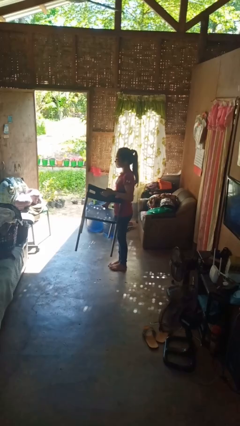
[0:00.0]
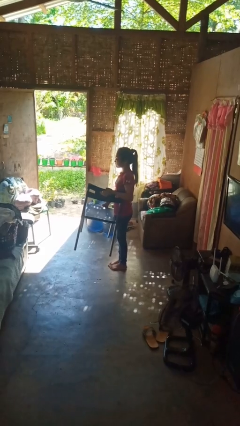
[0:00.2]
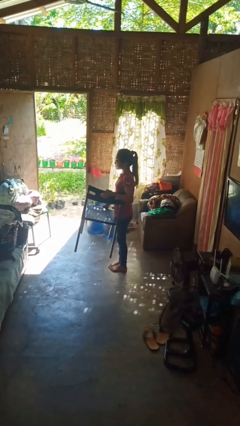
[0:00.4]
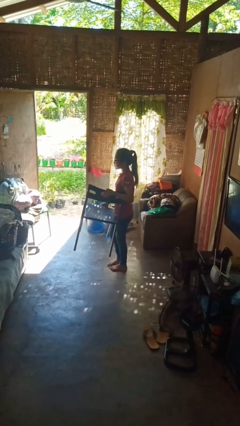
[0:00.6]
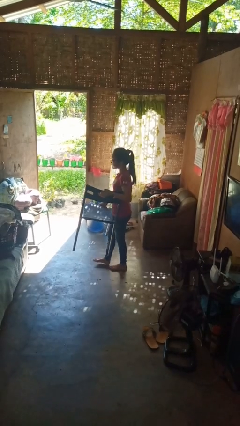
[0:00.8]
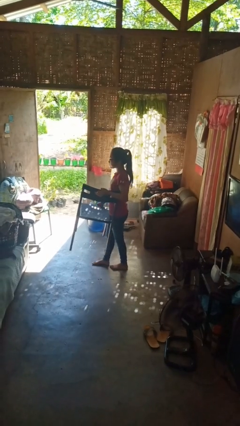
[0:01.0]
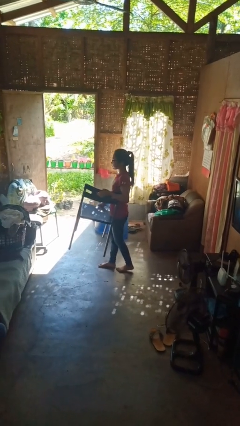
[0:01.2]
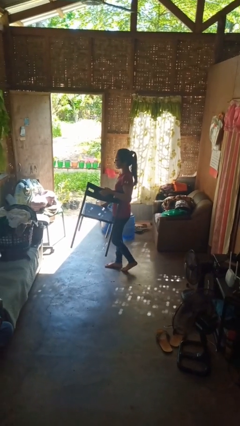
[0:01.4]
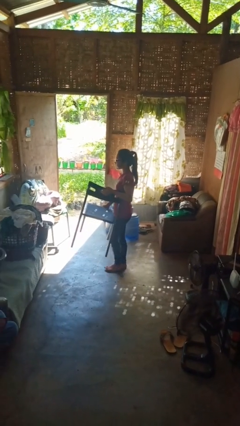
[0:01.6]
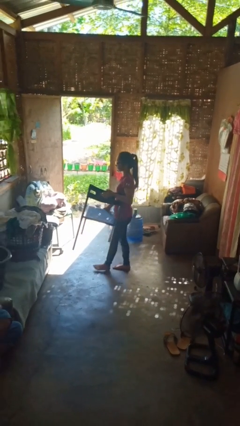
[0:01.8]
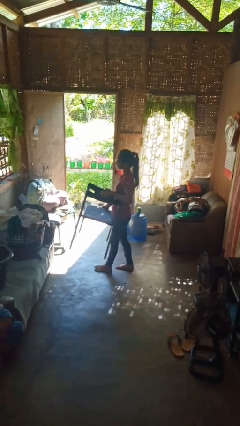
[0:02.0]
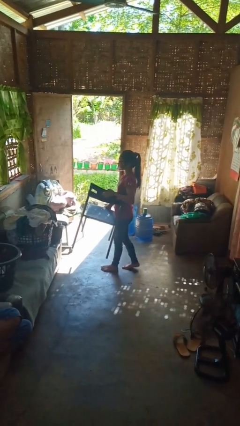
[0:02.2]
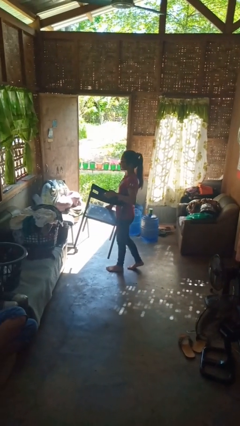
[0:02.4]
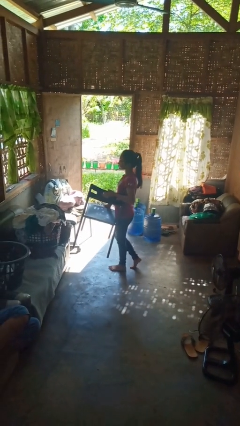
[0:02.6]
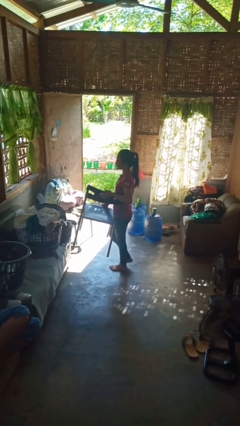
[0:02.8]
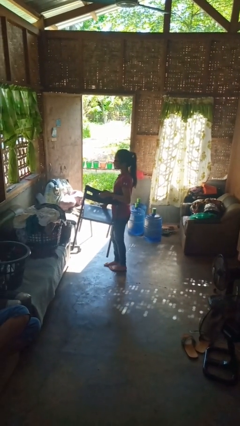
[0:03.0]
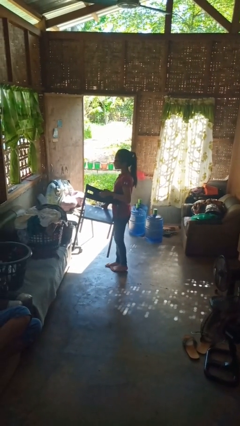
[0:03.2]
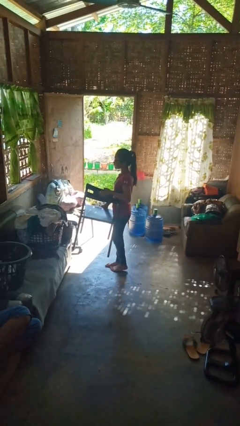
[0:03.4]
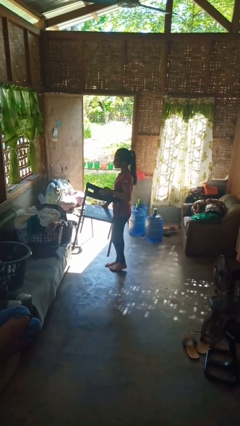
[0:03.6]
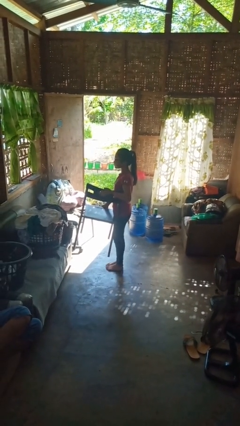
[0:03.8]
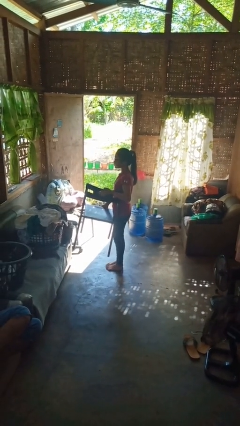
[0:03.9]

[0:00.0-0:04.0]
person carries furniture

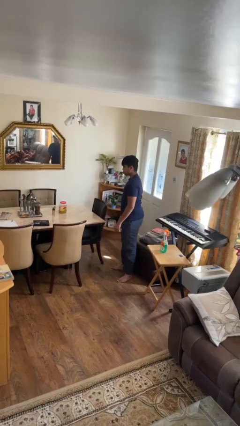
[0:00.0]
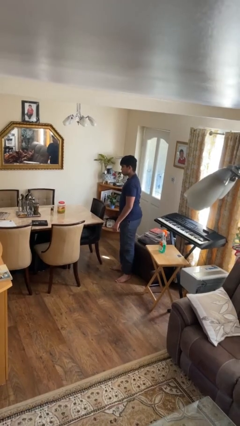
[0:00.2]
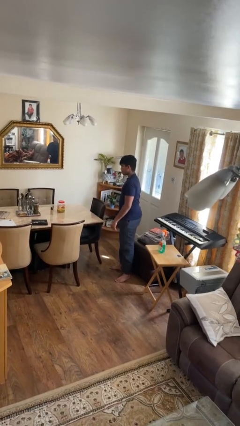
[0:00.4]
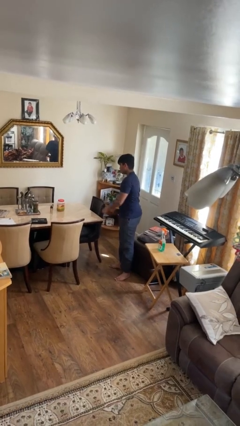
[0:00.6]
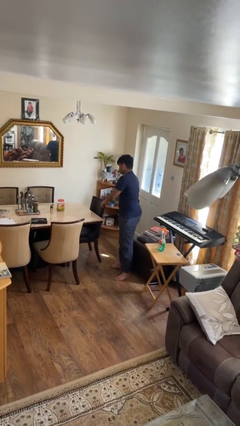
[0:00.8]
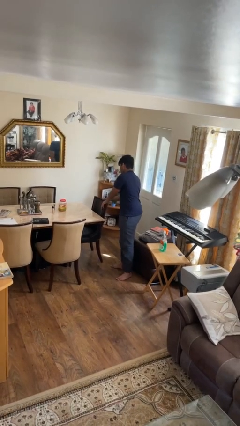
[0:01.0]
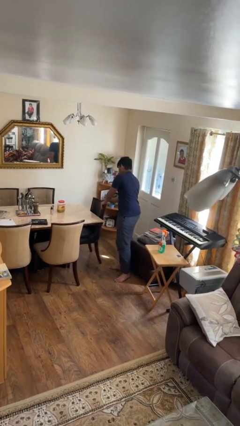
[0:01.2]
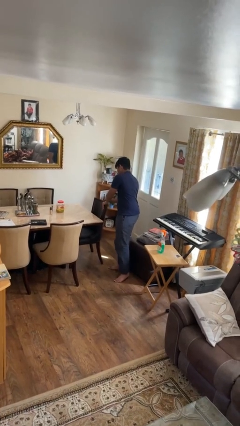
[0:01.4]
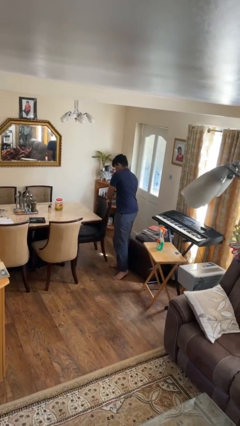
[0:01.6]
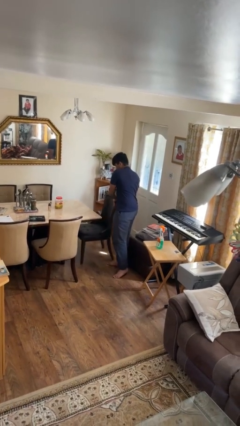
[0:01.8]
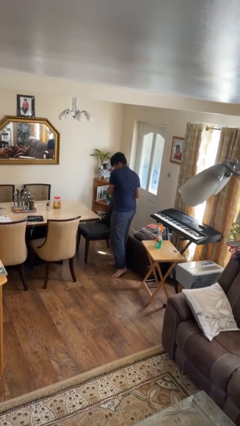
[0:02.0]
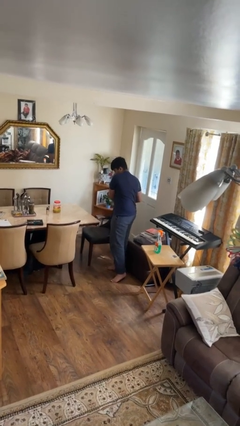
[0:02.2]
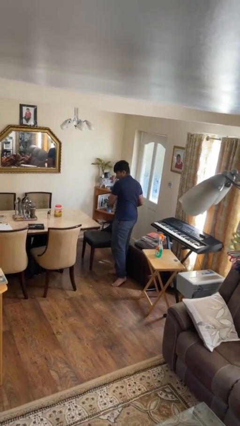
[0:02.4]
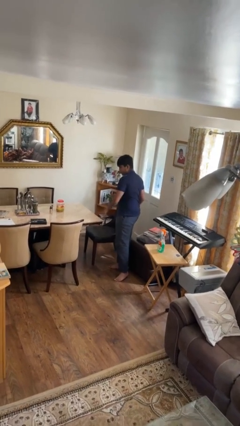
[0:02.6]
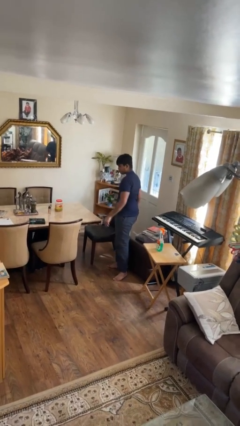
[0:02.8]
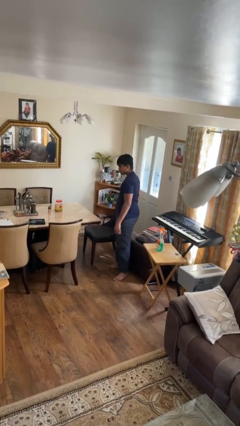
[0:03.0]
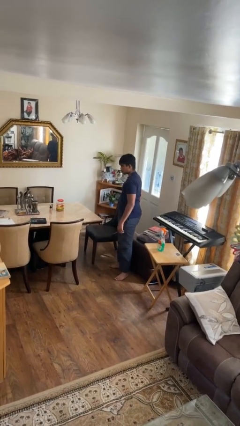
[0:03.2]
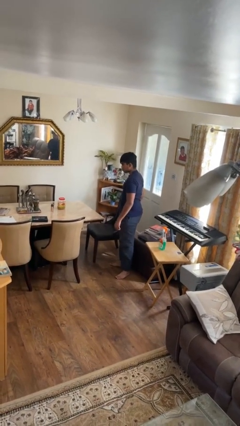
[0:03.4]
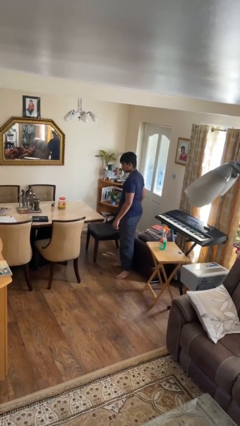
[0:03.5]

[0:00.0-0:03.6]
person pulls out chair

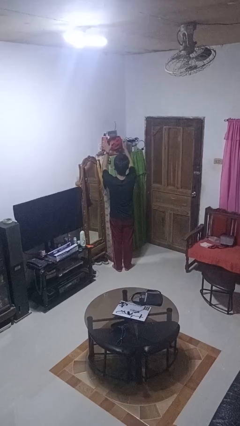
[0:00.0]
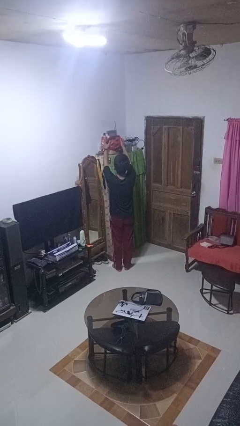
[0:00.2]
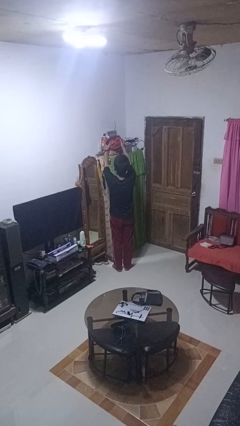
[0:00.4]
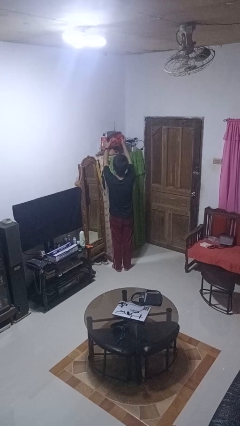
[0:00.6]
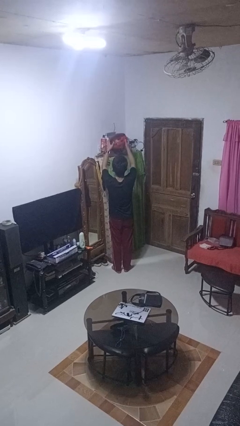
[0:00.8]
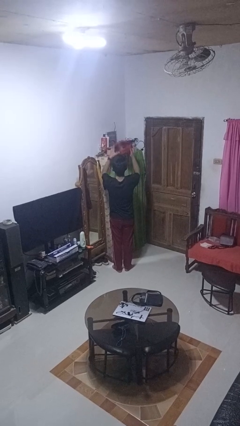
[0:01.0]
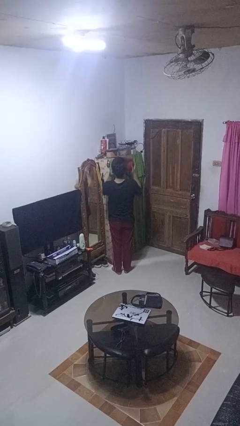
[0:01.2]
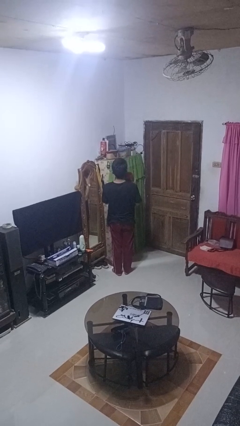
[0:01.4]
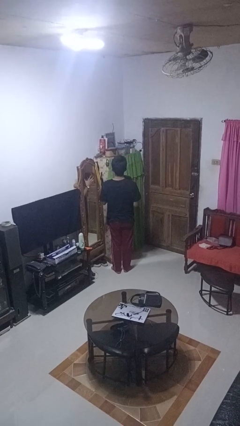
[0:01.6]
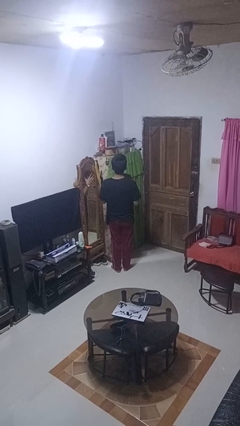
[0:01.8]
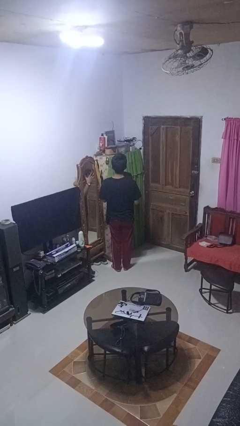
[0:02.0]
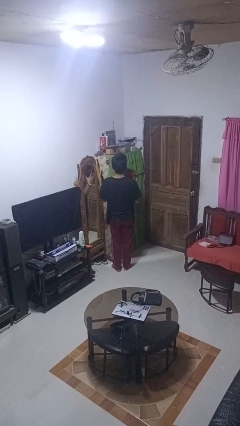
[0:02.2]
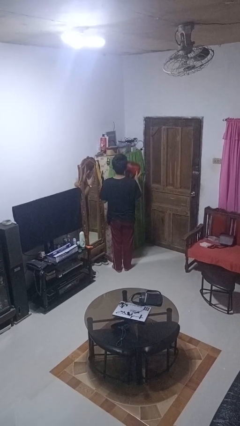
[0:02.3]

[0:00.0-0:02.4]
person picks up object from shelf

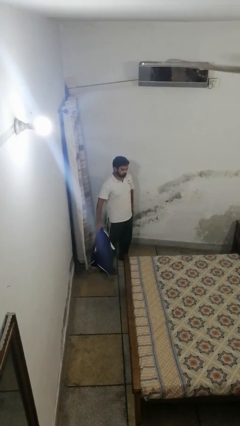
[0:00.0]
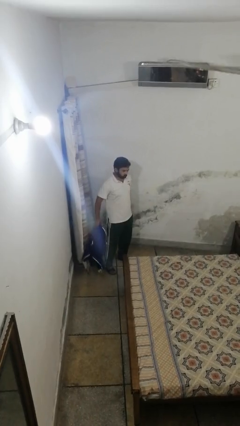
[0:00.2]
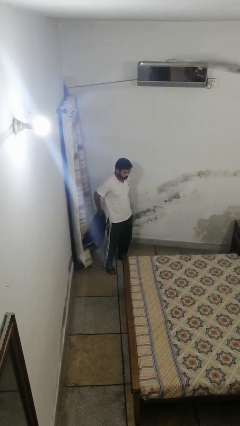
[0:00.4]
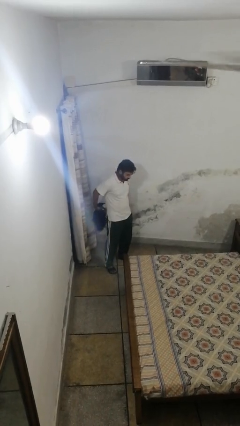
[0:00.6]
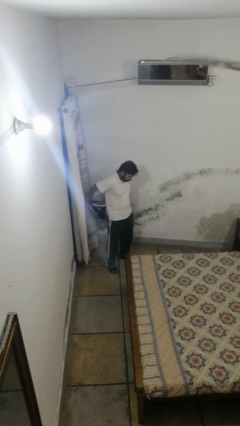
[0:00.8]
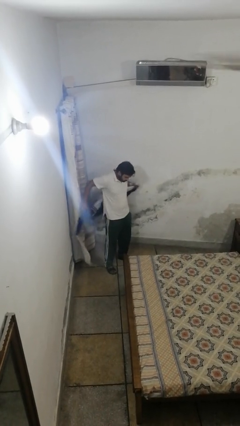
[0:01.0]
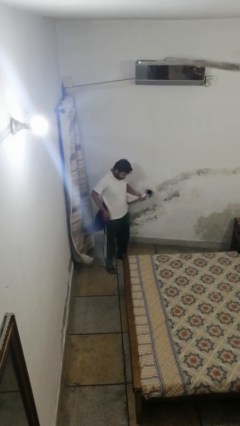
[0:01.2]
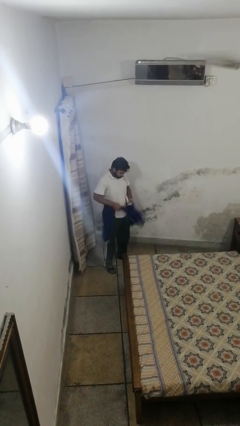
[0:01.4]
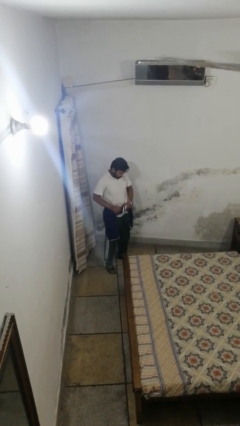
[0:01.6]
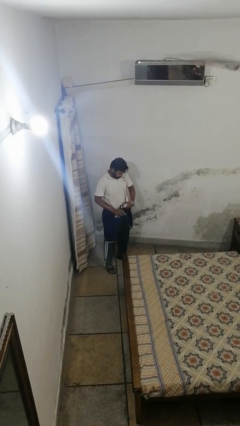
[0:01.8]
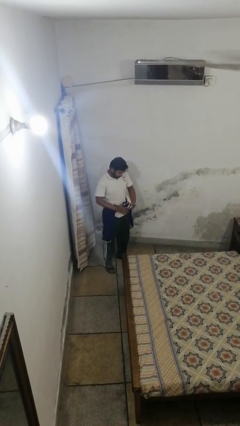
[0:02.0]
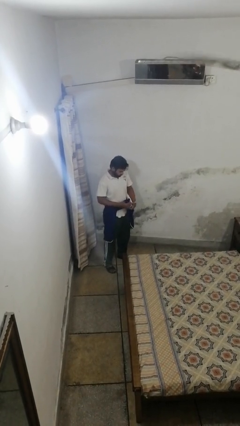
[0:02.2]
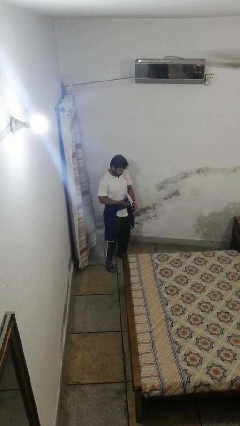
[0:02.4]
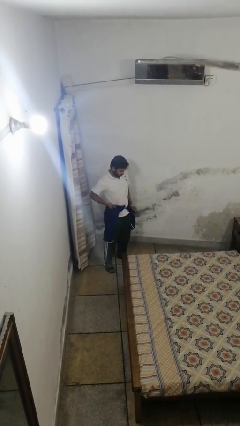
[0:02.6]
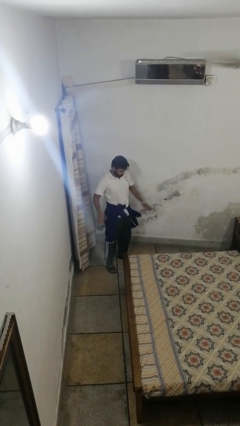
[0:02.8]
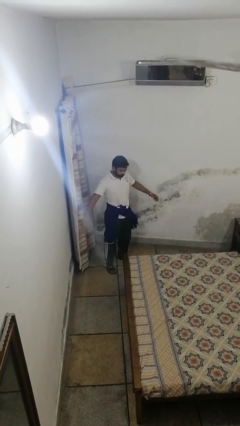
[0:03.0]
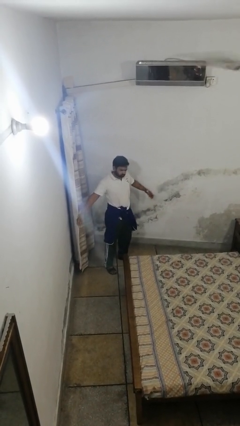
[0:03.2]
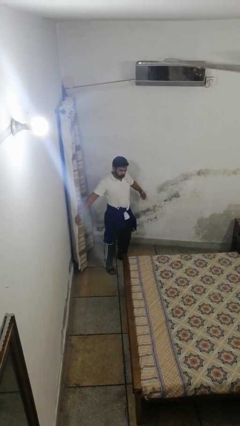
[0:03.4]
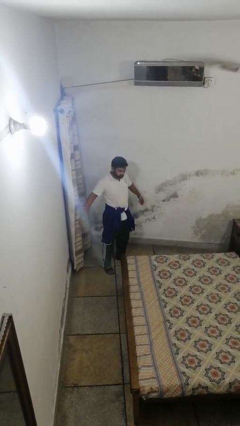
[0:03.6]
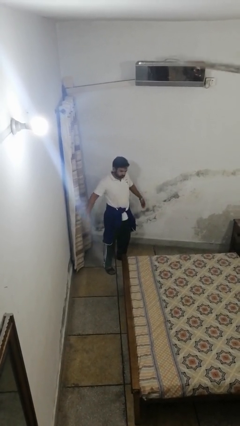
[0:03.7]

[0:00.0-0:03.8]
person ties jacket around waist

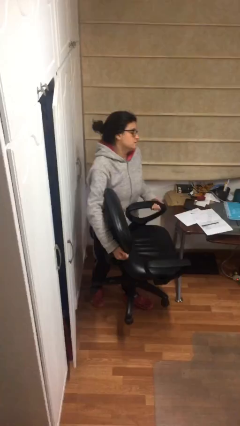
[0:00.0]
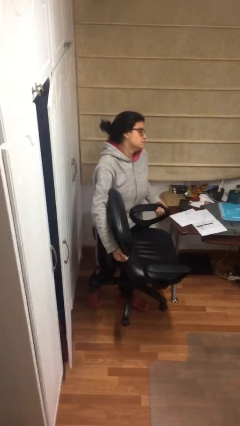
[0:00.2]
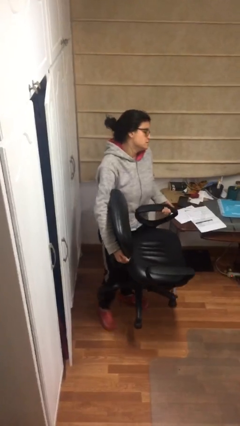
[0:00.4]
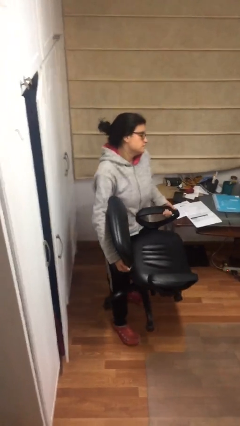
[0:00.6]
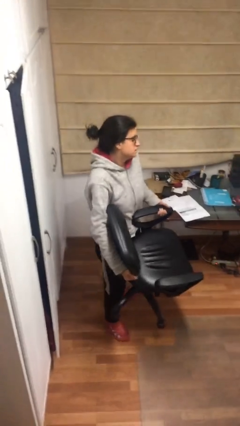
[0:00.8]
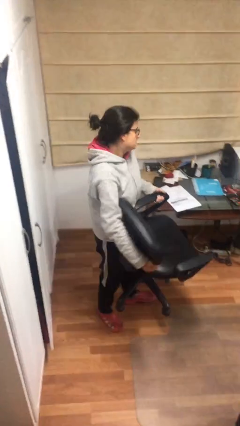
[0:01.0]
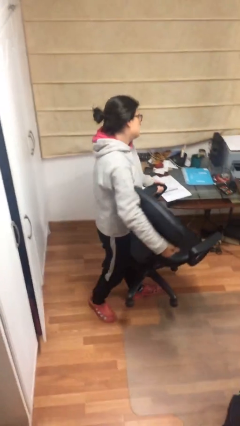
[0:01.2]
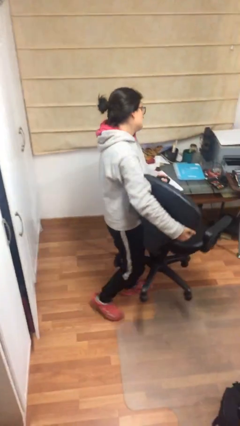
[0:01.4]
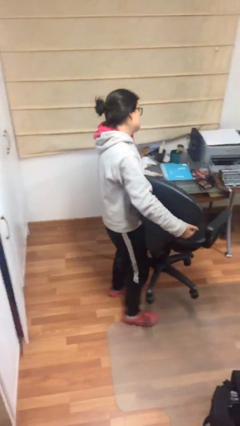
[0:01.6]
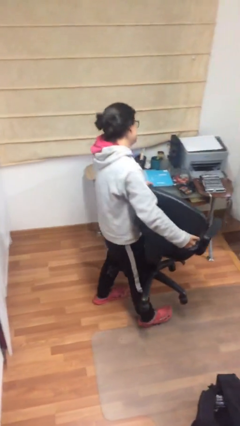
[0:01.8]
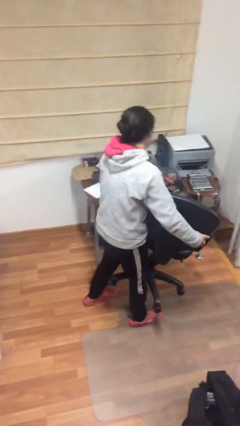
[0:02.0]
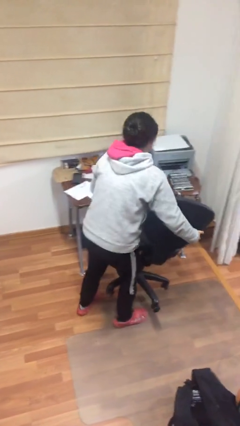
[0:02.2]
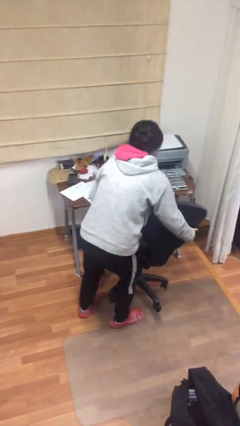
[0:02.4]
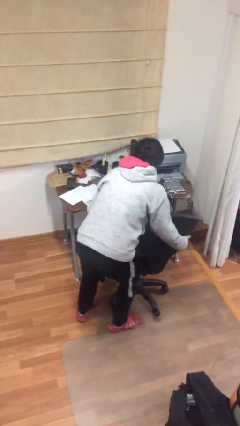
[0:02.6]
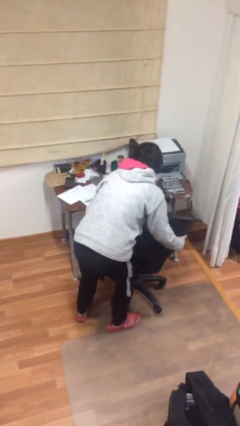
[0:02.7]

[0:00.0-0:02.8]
person carries heavy object

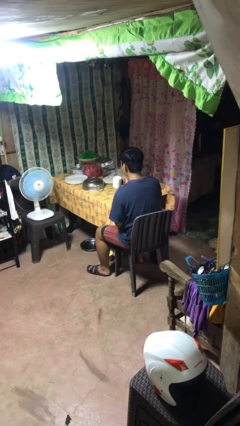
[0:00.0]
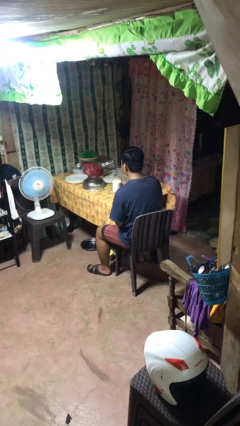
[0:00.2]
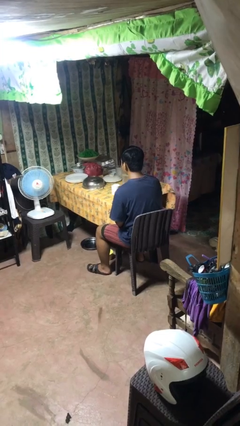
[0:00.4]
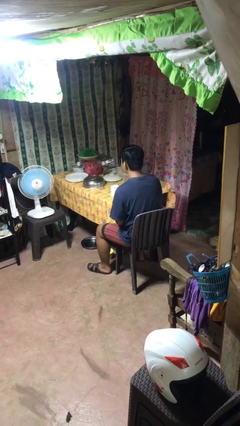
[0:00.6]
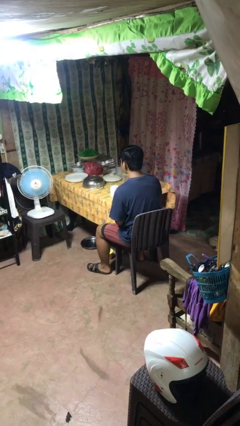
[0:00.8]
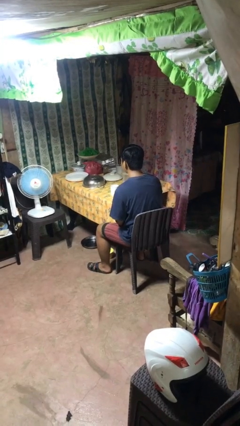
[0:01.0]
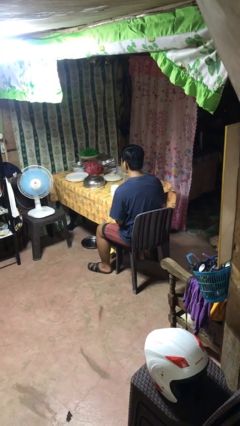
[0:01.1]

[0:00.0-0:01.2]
person puts down object on table
